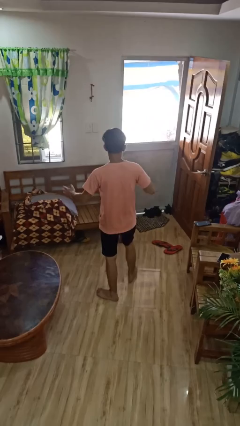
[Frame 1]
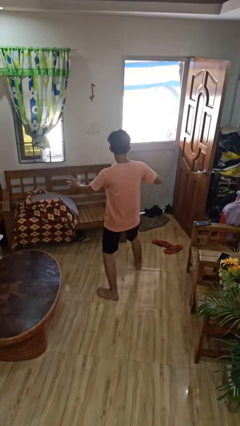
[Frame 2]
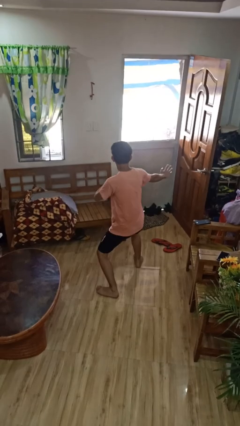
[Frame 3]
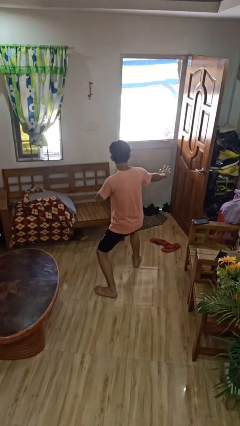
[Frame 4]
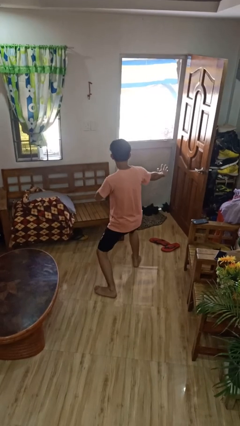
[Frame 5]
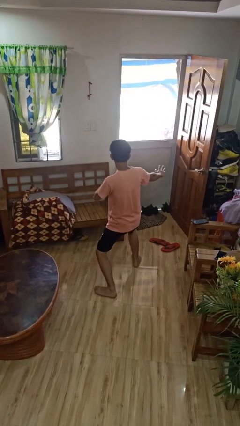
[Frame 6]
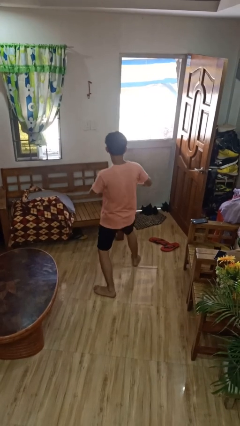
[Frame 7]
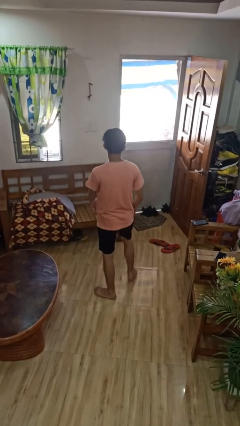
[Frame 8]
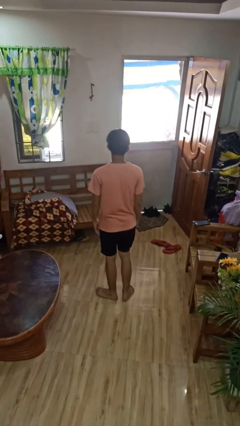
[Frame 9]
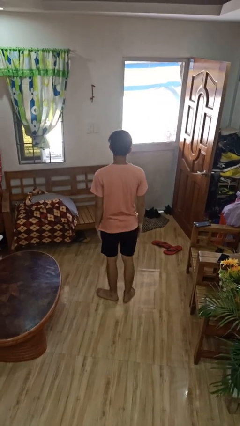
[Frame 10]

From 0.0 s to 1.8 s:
person karate chop

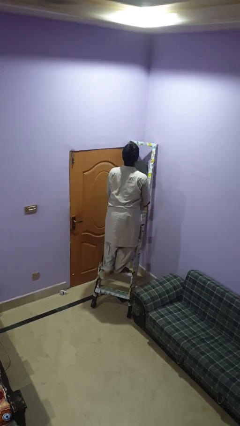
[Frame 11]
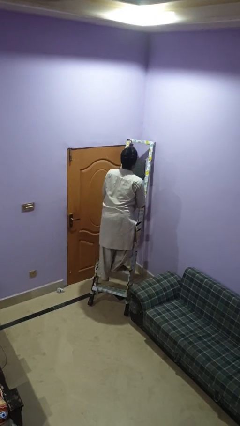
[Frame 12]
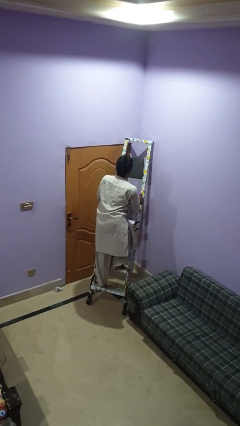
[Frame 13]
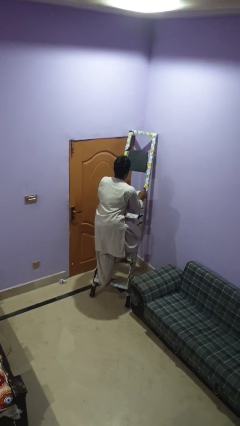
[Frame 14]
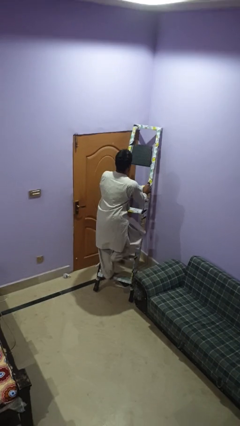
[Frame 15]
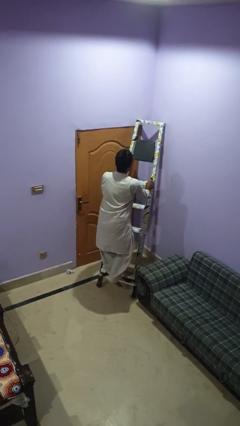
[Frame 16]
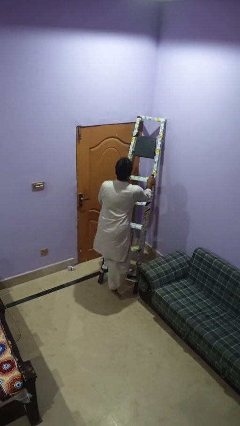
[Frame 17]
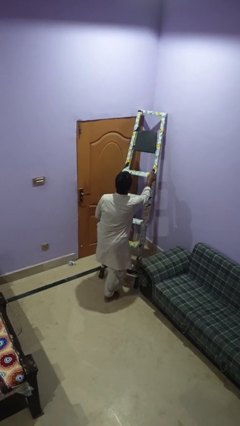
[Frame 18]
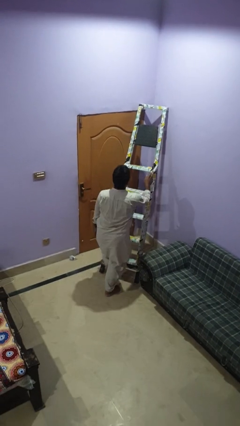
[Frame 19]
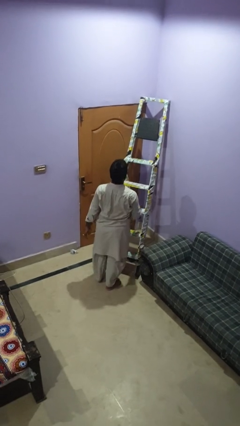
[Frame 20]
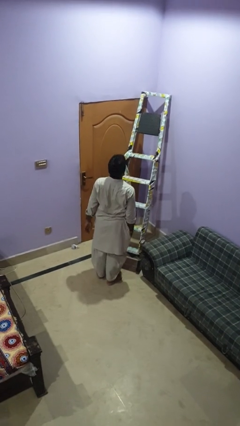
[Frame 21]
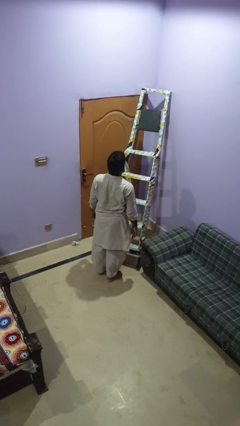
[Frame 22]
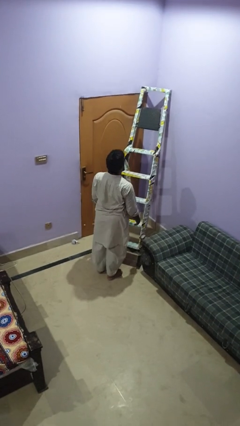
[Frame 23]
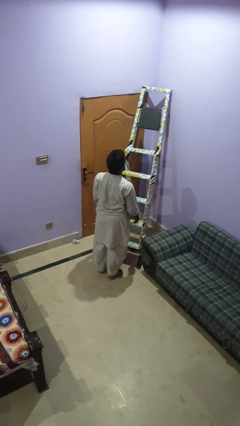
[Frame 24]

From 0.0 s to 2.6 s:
person climbs down ladder

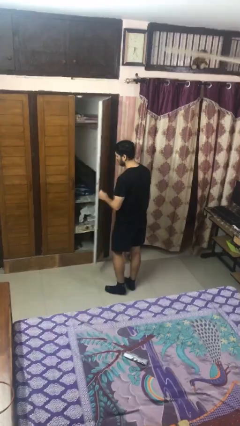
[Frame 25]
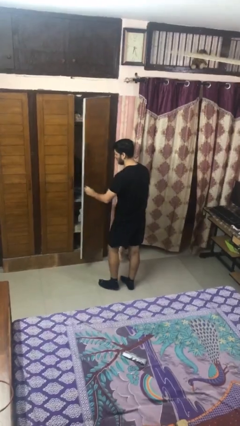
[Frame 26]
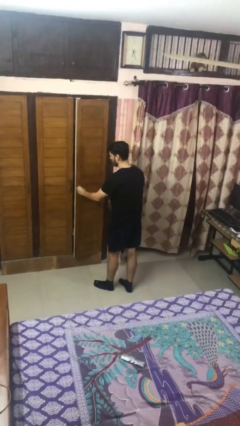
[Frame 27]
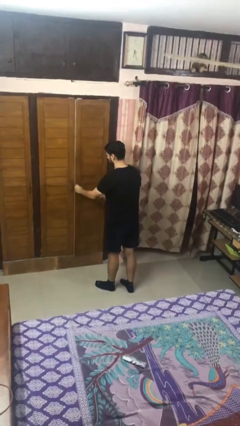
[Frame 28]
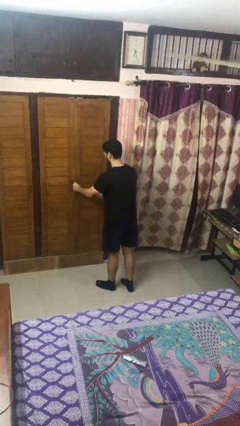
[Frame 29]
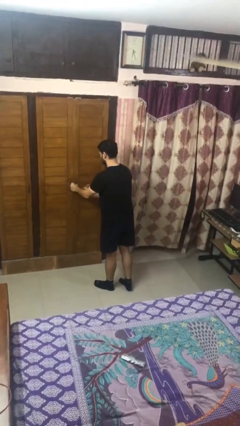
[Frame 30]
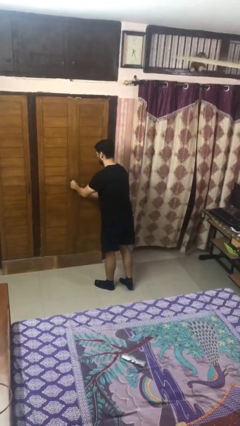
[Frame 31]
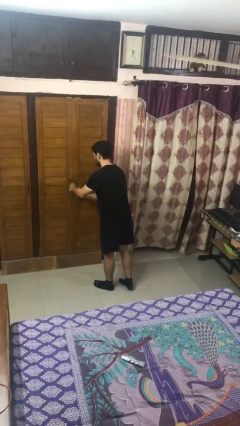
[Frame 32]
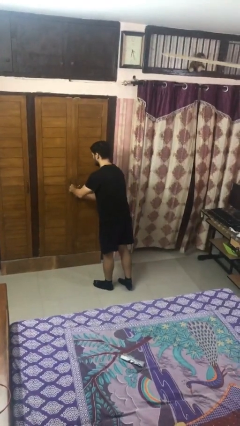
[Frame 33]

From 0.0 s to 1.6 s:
person closes facility door

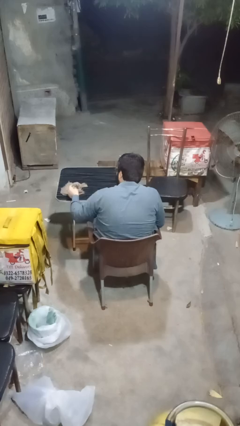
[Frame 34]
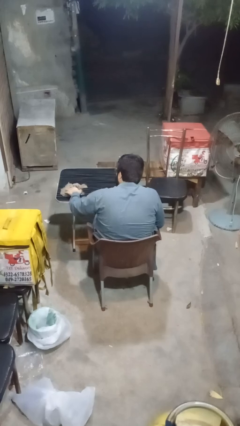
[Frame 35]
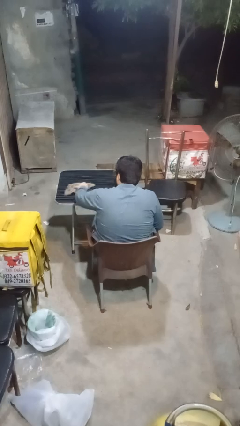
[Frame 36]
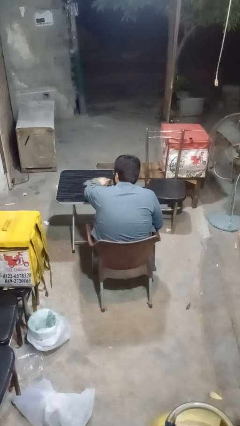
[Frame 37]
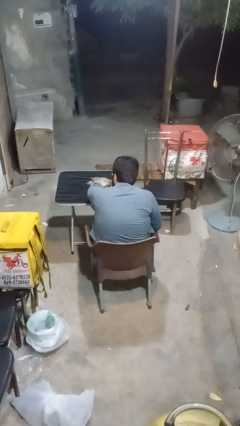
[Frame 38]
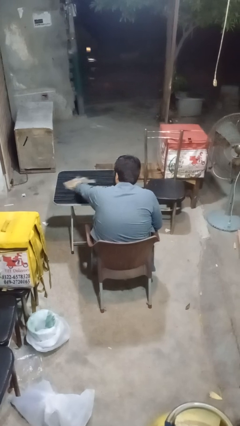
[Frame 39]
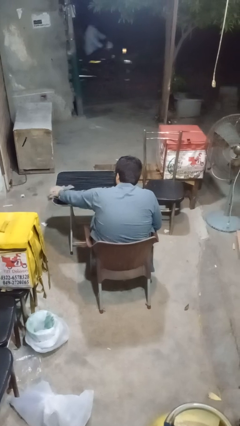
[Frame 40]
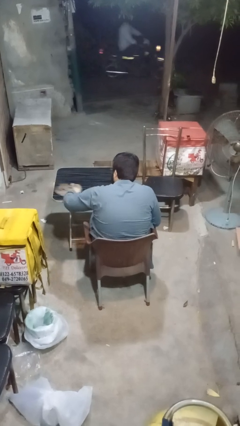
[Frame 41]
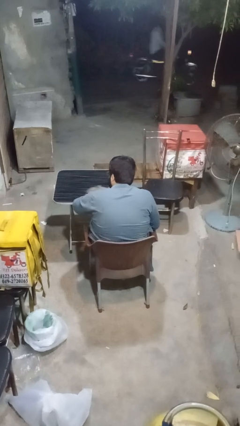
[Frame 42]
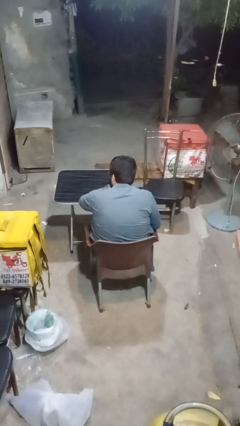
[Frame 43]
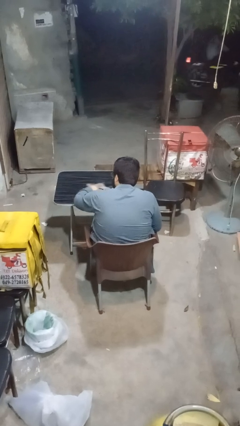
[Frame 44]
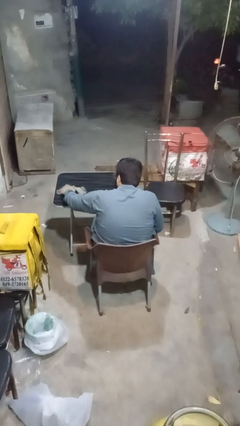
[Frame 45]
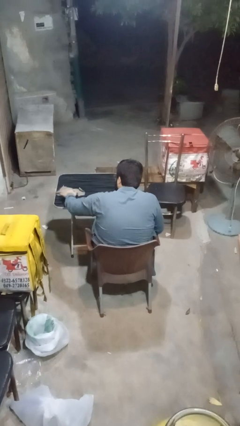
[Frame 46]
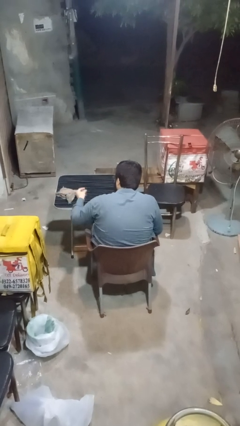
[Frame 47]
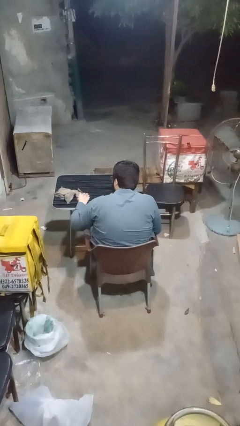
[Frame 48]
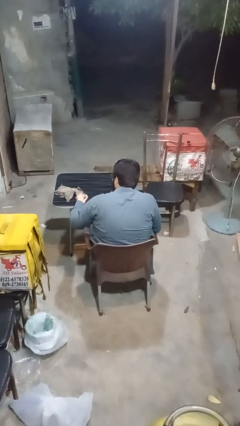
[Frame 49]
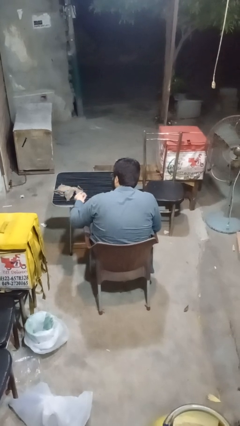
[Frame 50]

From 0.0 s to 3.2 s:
person cleans table with rag

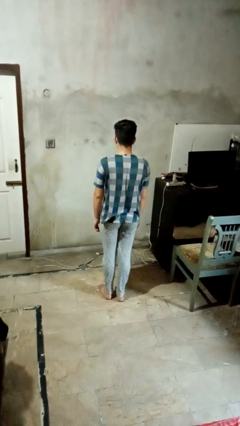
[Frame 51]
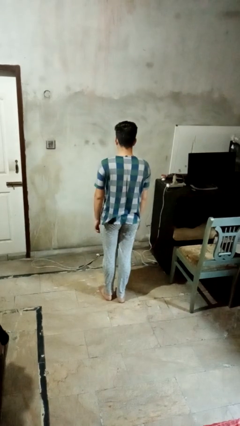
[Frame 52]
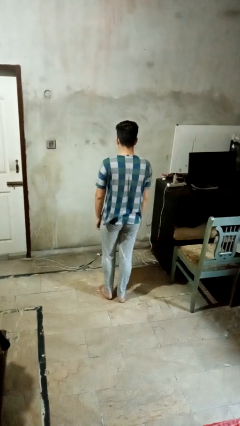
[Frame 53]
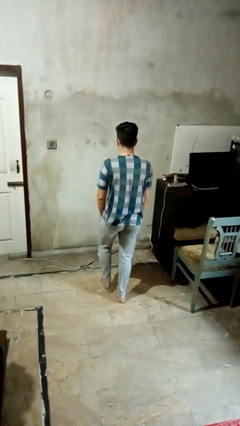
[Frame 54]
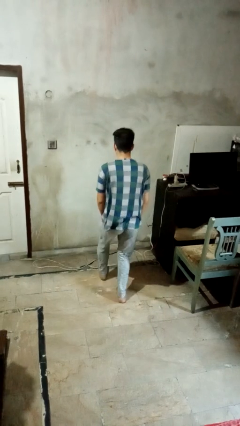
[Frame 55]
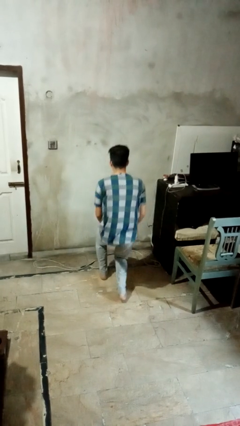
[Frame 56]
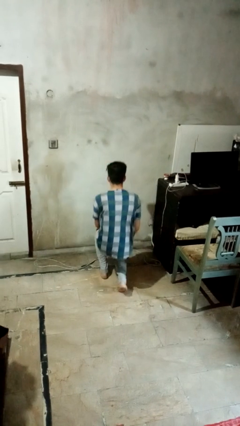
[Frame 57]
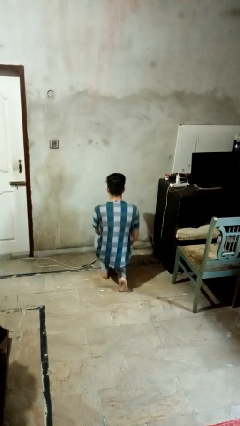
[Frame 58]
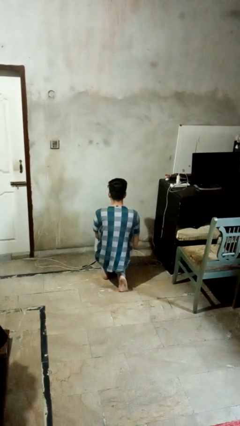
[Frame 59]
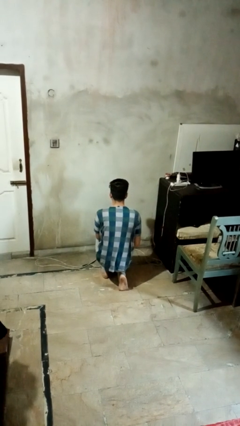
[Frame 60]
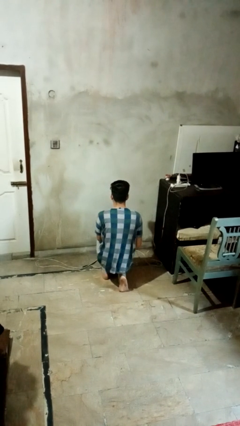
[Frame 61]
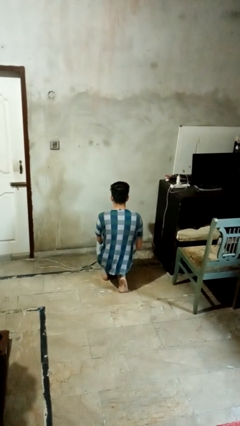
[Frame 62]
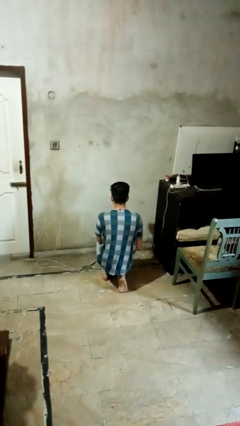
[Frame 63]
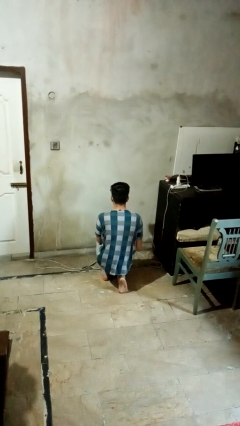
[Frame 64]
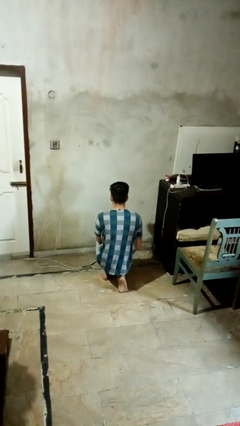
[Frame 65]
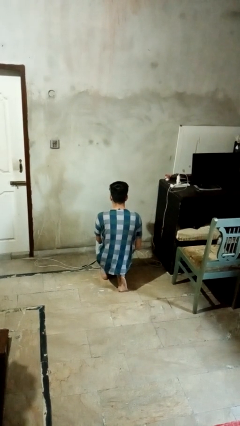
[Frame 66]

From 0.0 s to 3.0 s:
person kneels

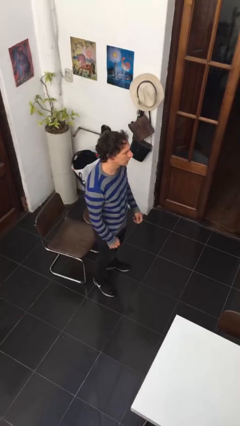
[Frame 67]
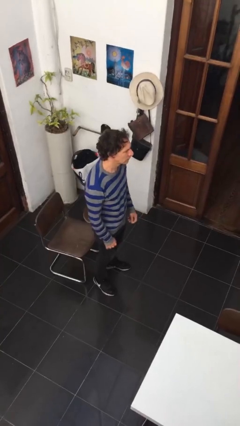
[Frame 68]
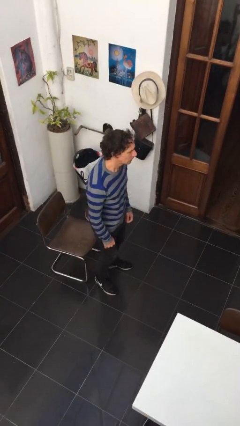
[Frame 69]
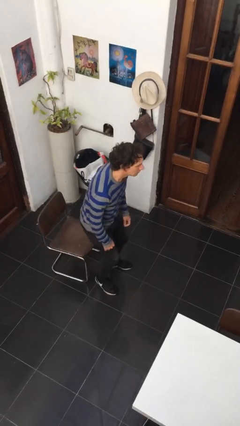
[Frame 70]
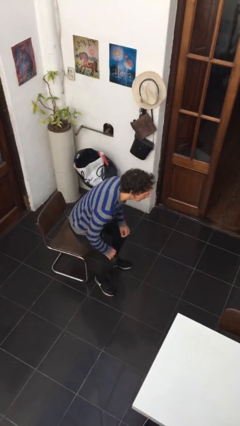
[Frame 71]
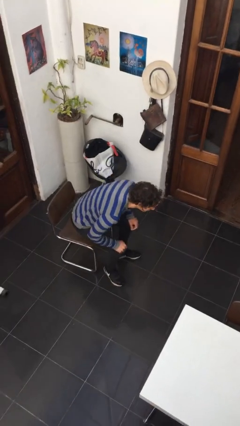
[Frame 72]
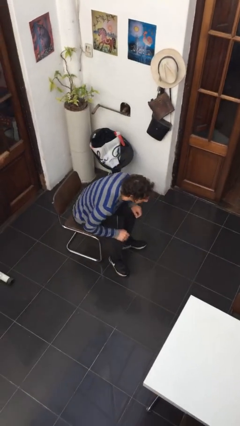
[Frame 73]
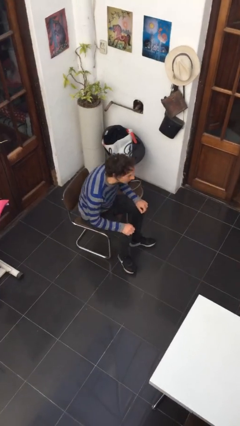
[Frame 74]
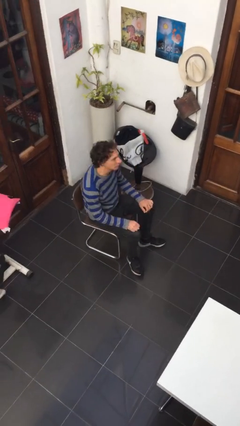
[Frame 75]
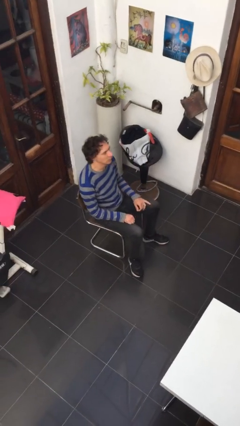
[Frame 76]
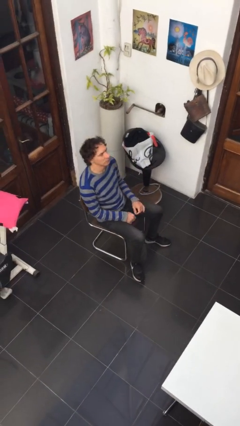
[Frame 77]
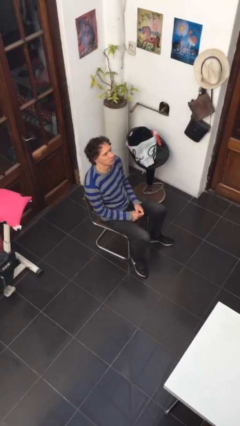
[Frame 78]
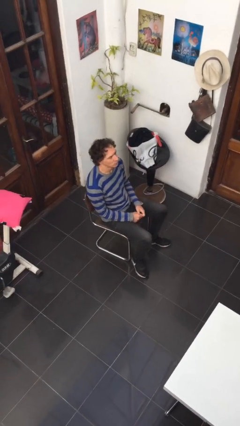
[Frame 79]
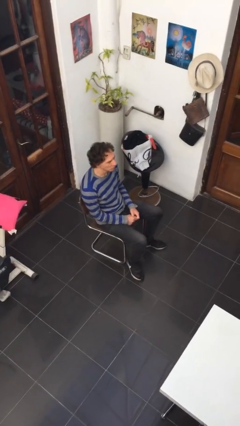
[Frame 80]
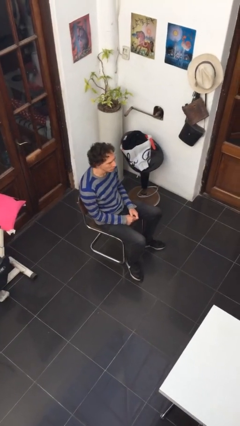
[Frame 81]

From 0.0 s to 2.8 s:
person sits down

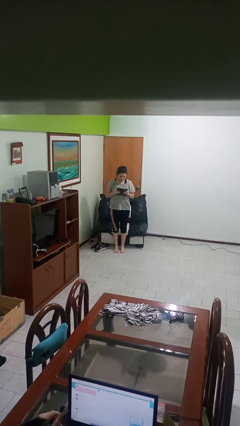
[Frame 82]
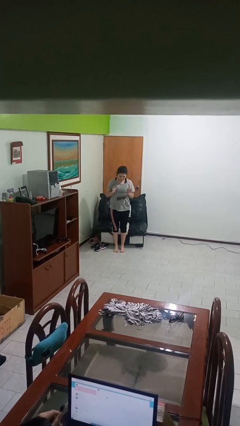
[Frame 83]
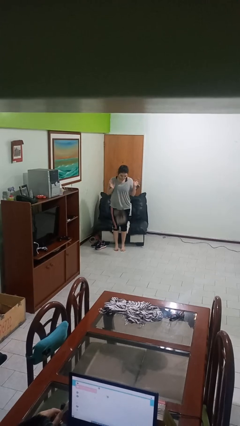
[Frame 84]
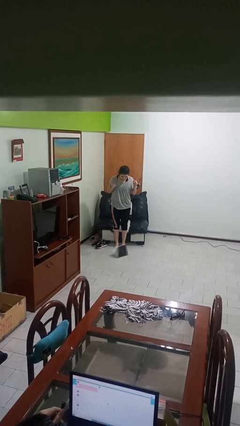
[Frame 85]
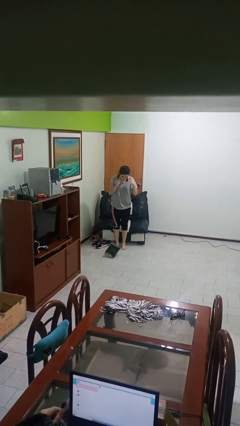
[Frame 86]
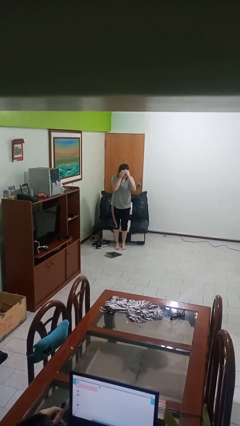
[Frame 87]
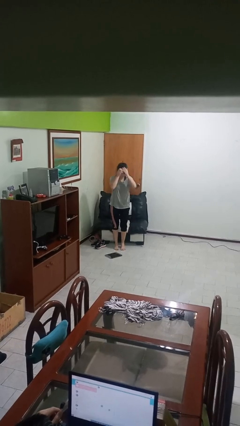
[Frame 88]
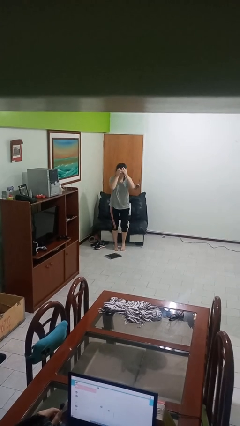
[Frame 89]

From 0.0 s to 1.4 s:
person drops object

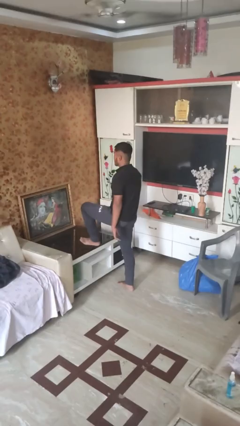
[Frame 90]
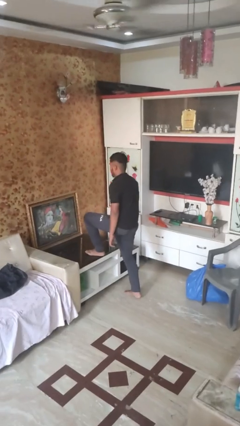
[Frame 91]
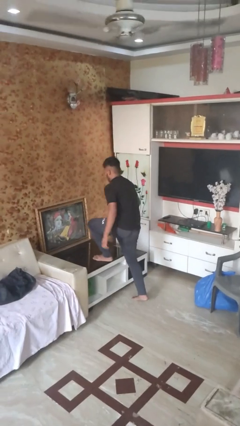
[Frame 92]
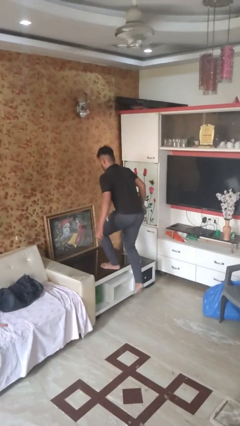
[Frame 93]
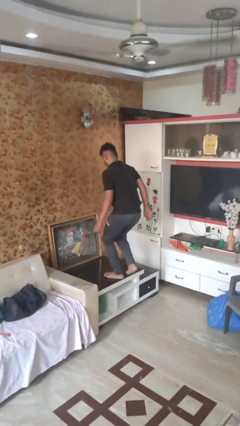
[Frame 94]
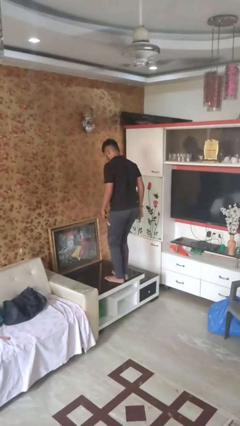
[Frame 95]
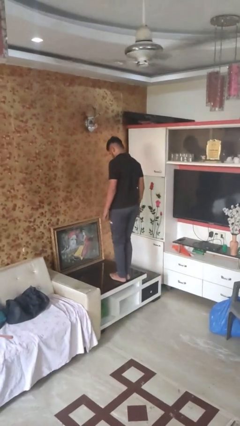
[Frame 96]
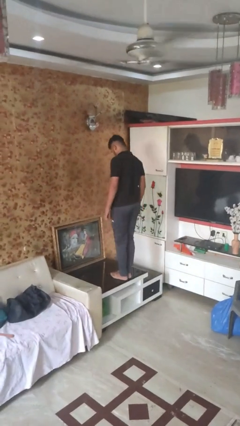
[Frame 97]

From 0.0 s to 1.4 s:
person climbs on table
